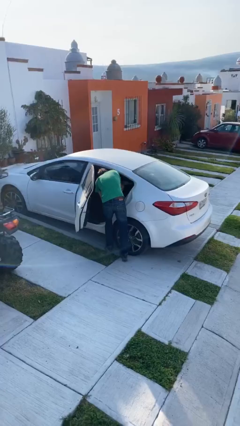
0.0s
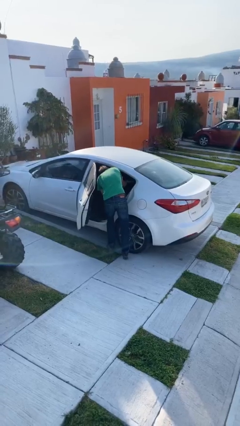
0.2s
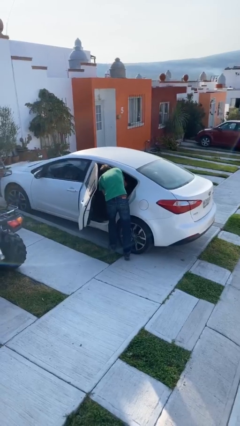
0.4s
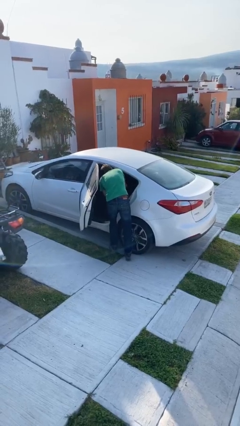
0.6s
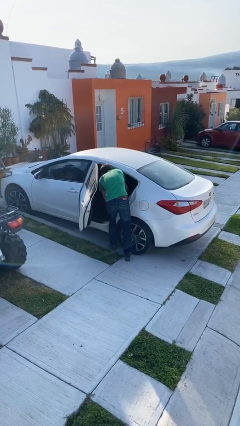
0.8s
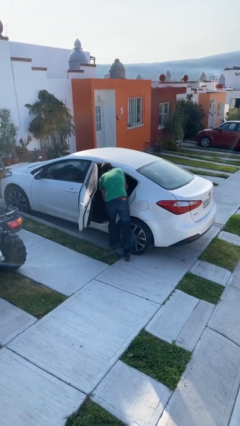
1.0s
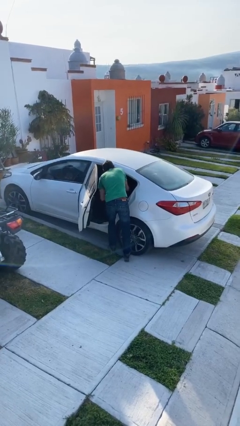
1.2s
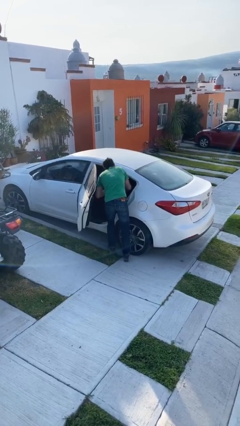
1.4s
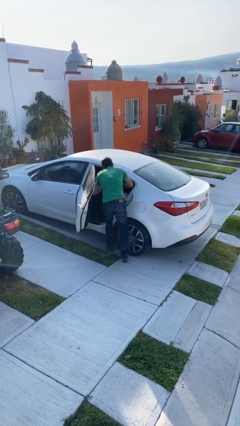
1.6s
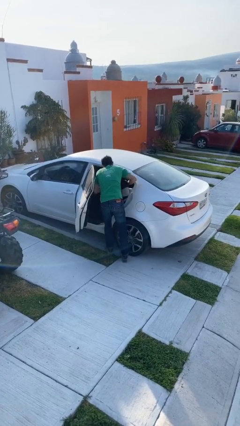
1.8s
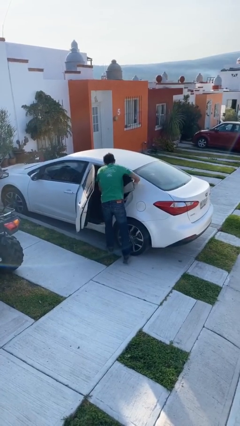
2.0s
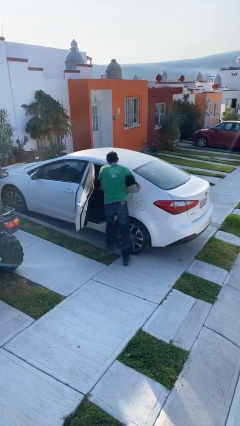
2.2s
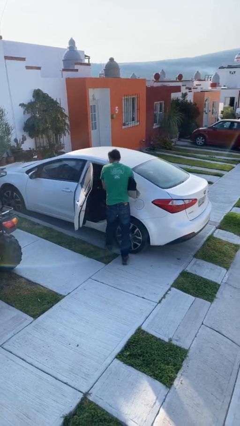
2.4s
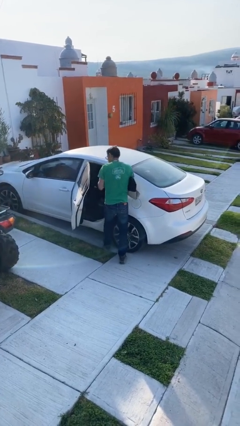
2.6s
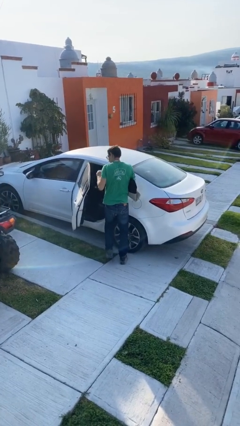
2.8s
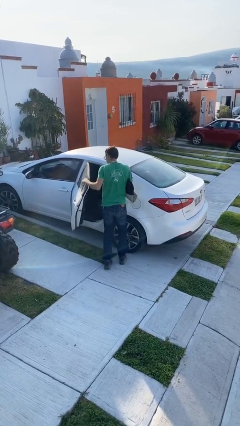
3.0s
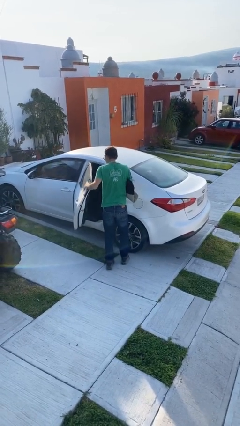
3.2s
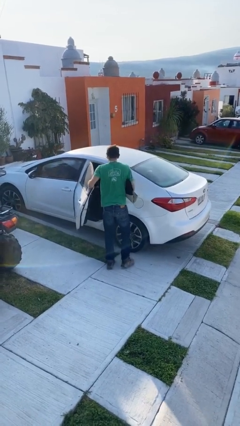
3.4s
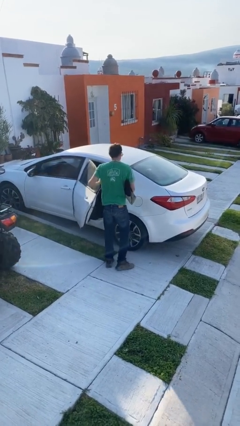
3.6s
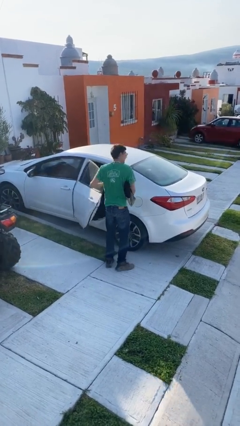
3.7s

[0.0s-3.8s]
person unloads car

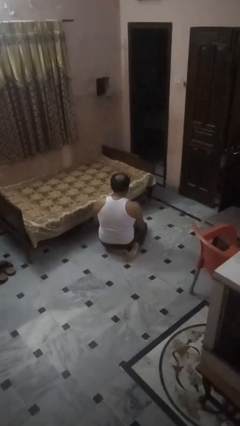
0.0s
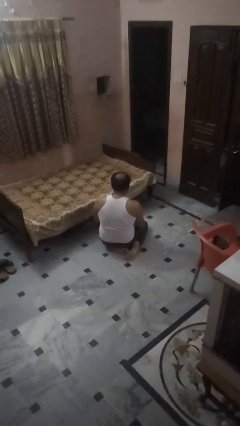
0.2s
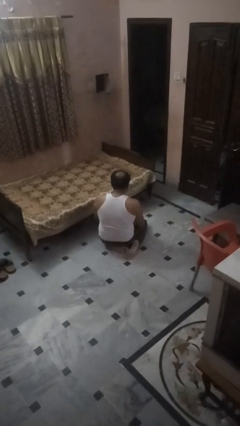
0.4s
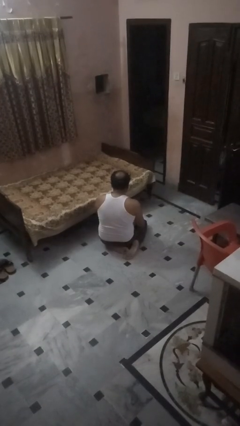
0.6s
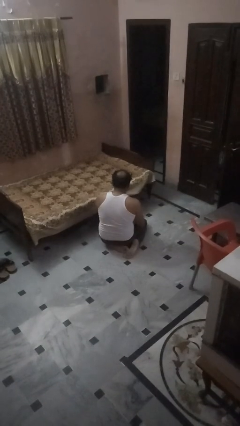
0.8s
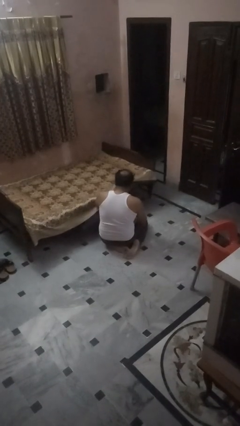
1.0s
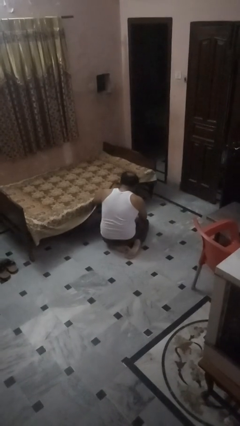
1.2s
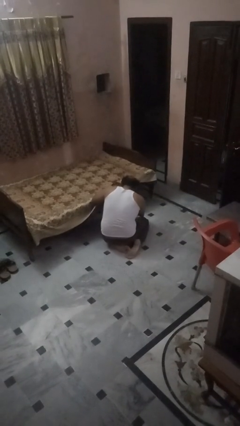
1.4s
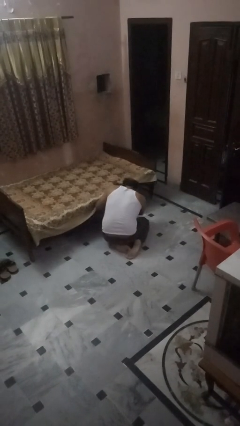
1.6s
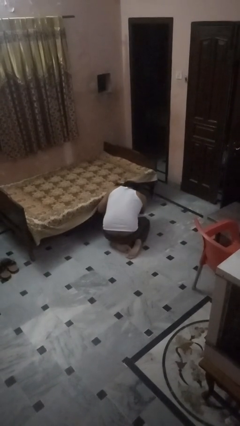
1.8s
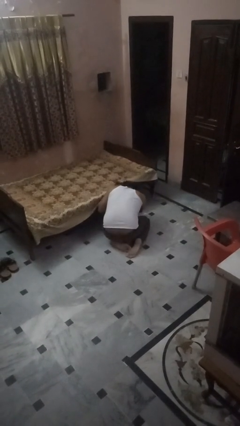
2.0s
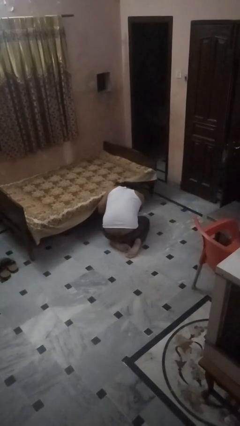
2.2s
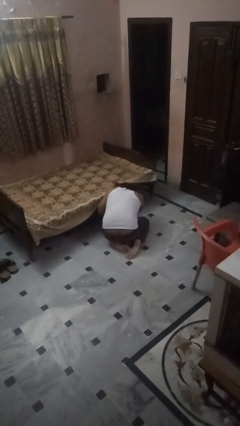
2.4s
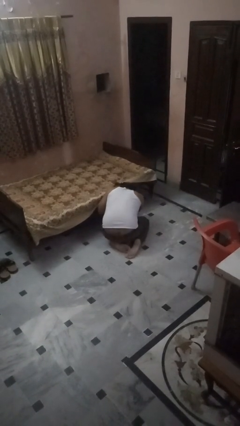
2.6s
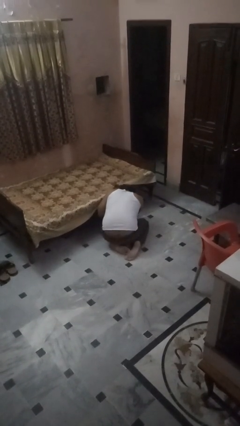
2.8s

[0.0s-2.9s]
person searches under bed

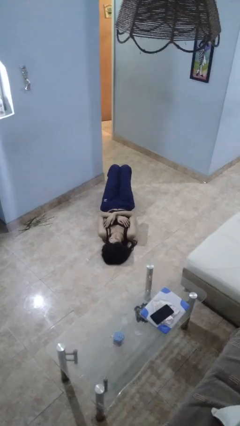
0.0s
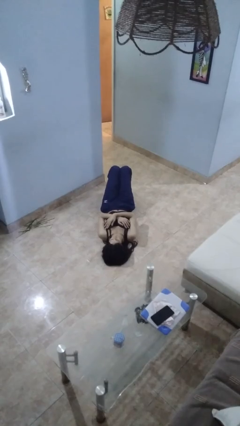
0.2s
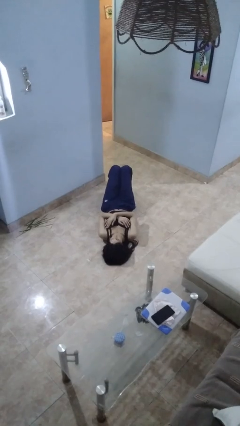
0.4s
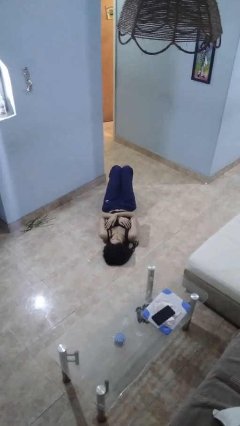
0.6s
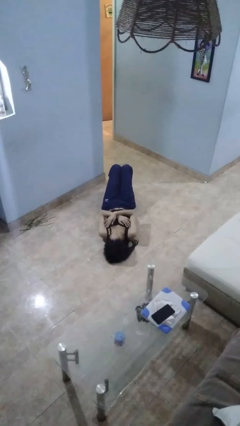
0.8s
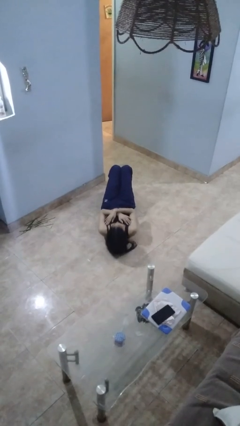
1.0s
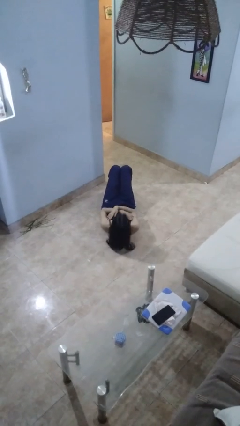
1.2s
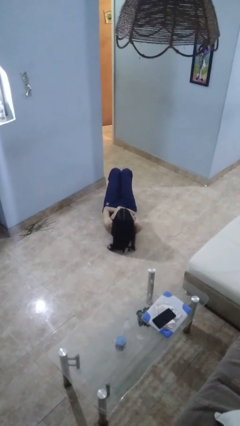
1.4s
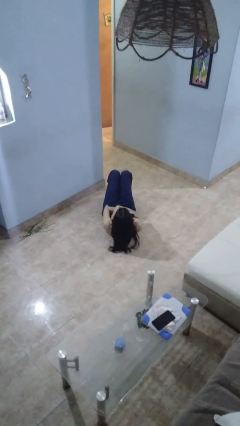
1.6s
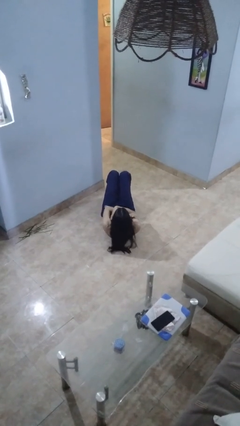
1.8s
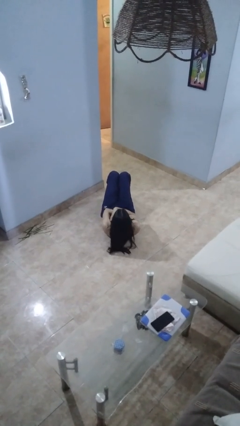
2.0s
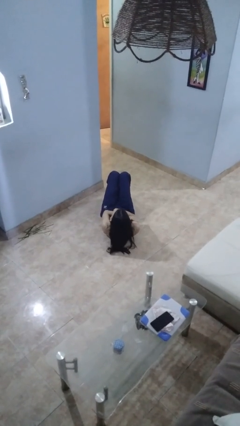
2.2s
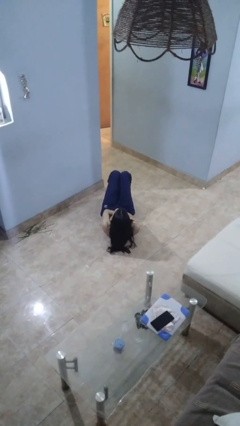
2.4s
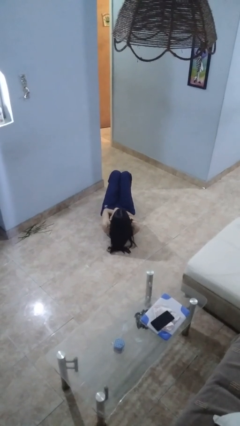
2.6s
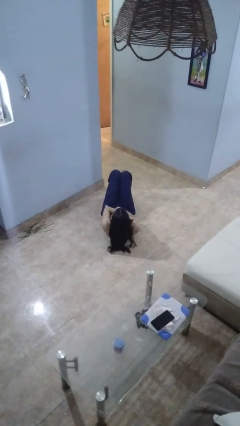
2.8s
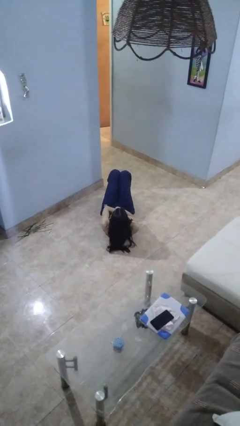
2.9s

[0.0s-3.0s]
person exercises with situp

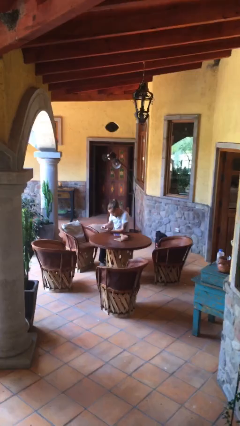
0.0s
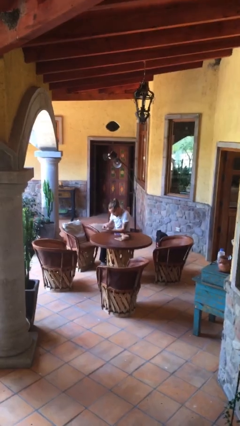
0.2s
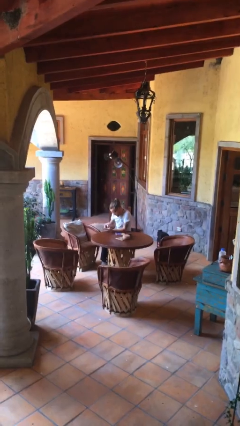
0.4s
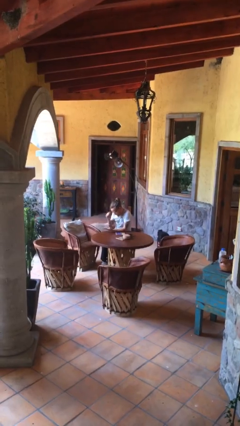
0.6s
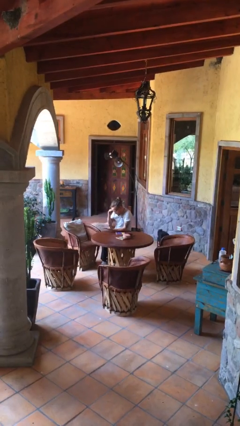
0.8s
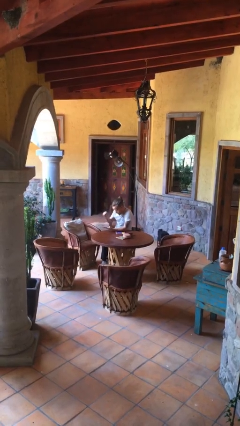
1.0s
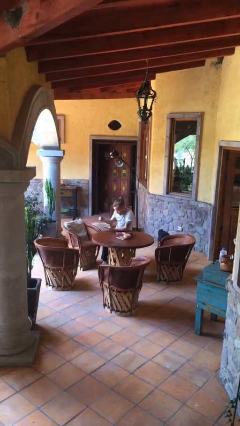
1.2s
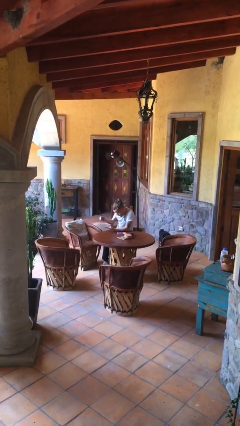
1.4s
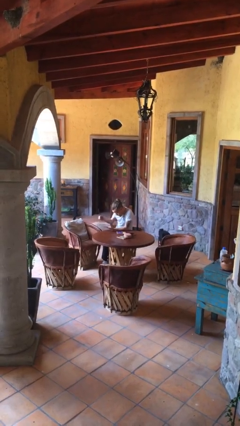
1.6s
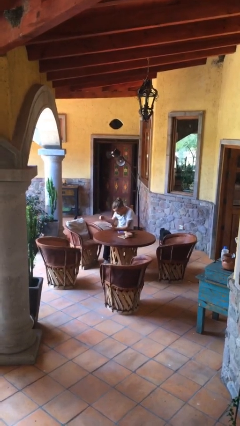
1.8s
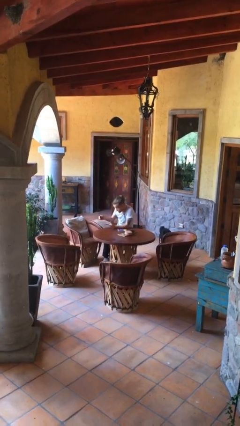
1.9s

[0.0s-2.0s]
person takes off glasses

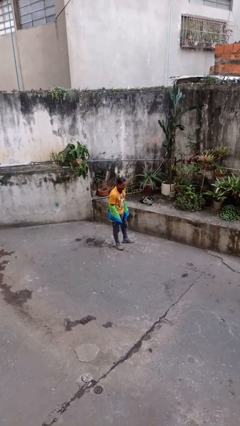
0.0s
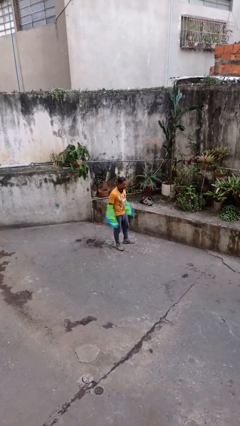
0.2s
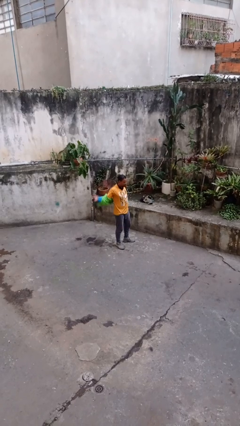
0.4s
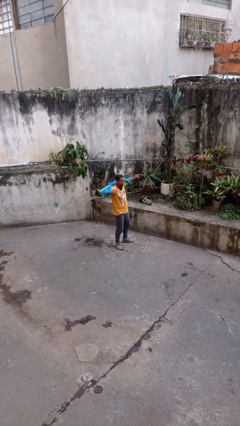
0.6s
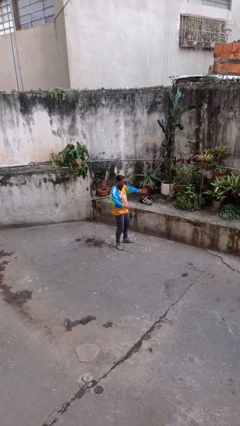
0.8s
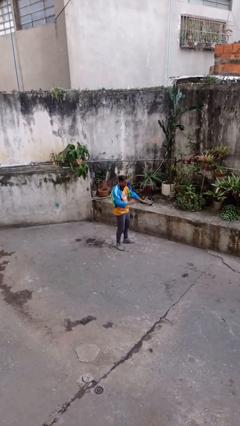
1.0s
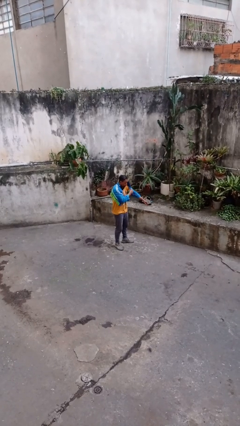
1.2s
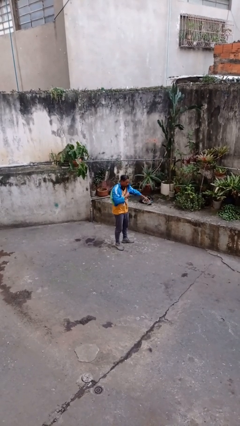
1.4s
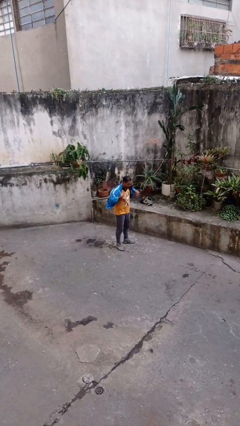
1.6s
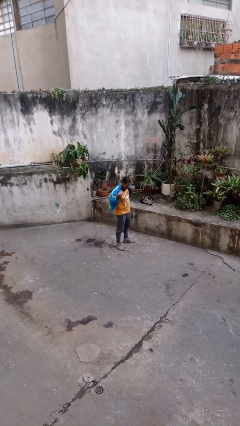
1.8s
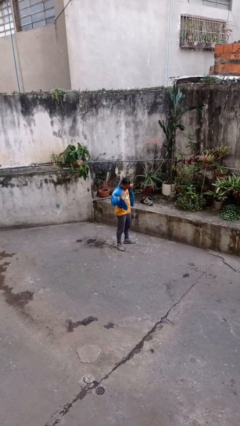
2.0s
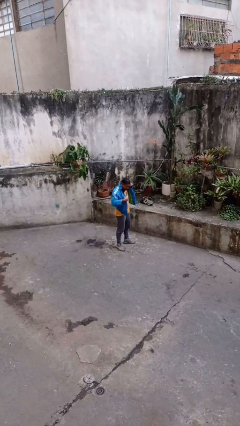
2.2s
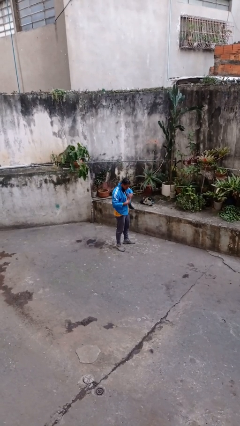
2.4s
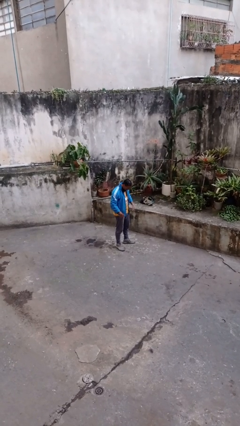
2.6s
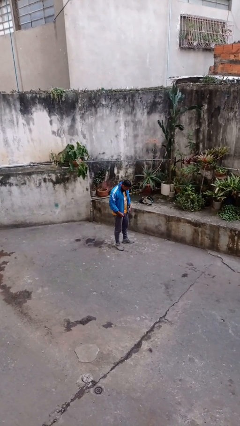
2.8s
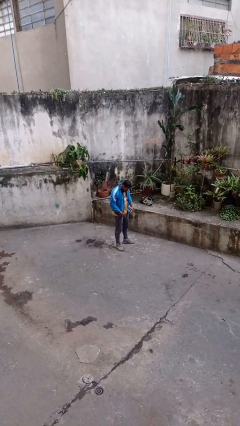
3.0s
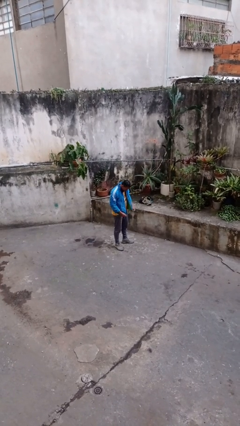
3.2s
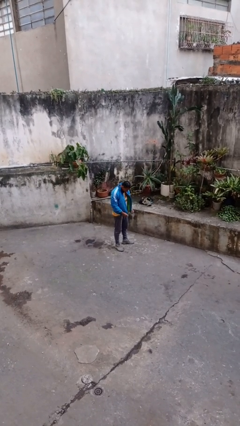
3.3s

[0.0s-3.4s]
person puts on jacket

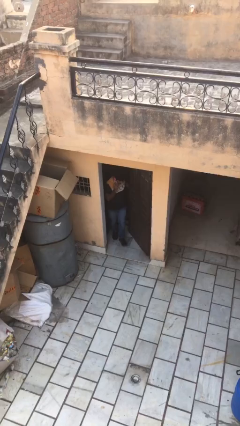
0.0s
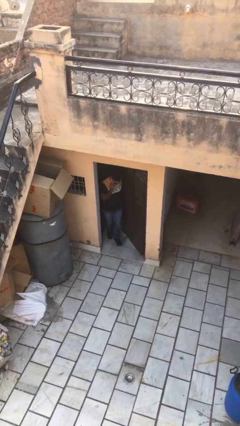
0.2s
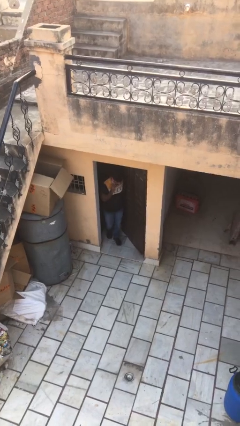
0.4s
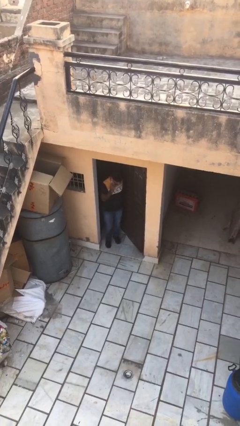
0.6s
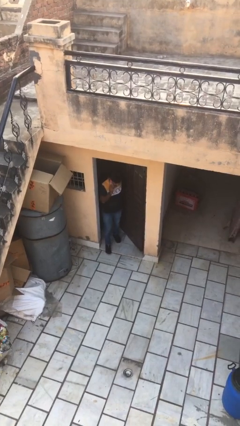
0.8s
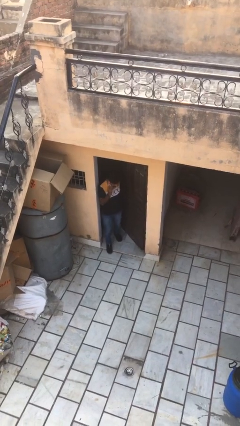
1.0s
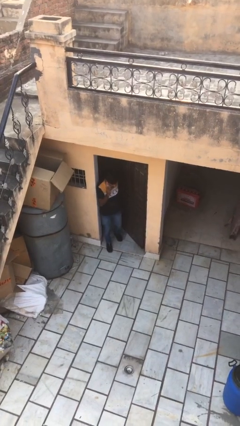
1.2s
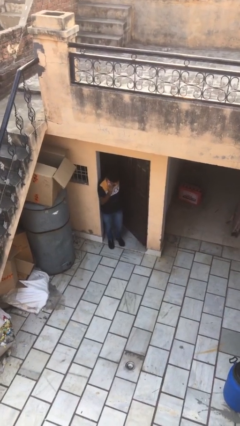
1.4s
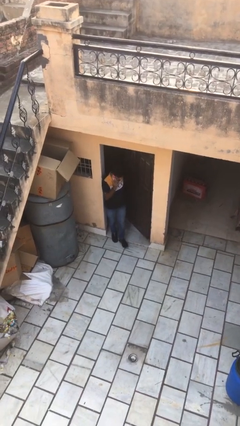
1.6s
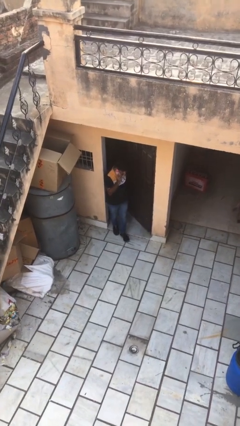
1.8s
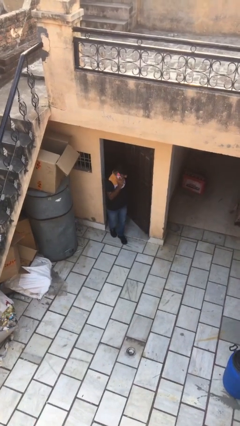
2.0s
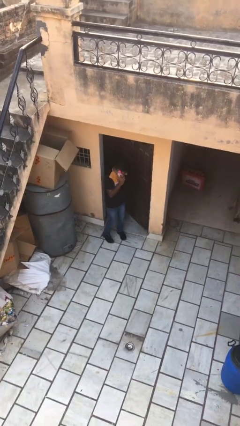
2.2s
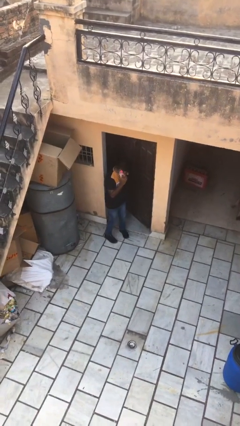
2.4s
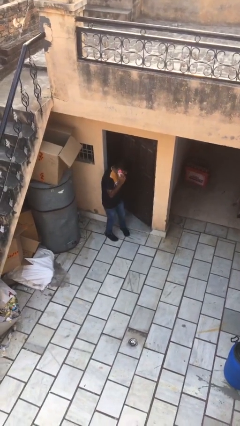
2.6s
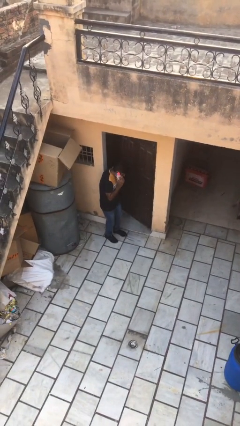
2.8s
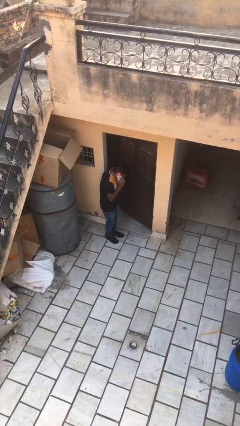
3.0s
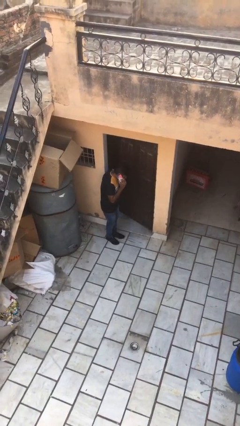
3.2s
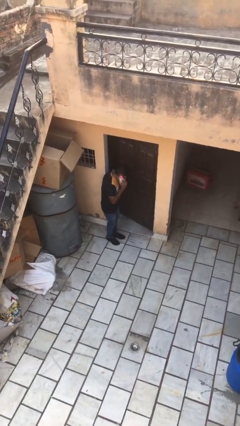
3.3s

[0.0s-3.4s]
person enters scene through structure
